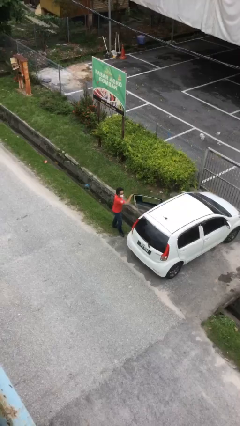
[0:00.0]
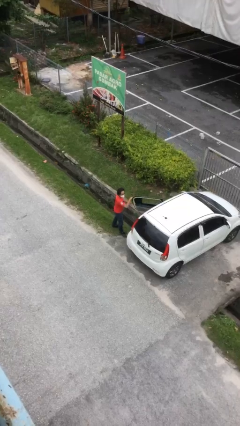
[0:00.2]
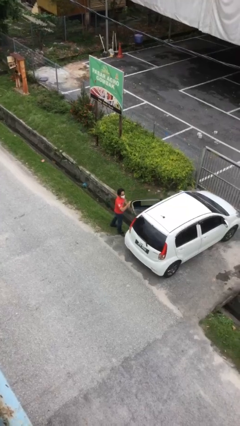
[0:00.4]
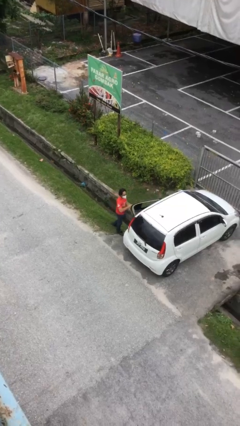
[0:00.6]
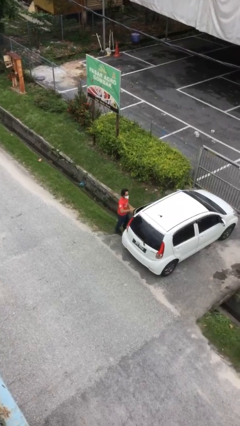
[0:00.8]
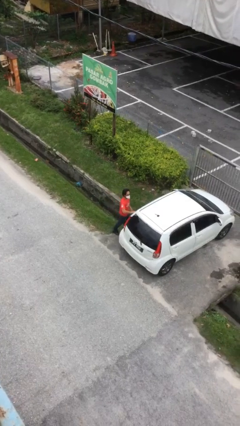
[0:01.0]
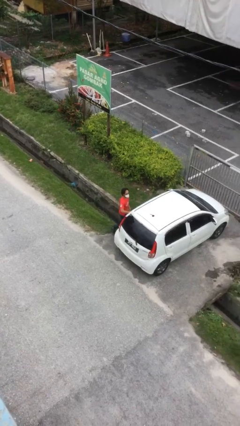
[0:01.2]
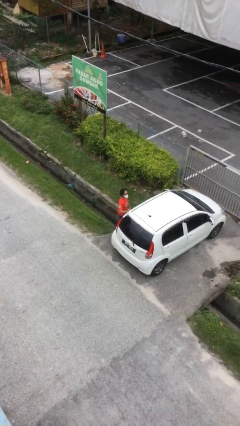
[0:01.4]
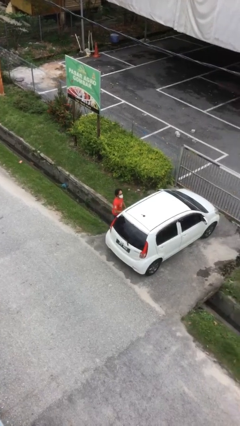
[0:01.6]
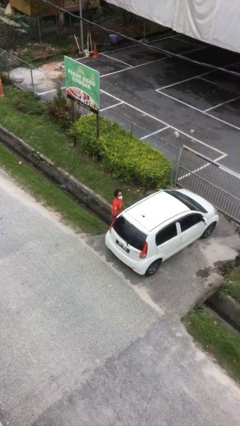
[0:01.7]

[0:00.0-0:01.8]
person closes car door

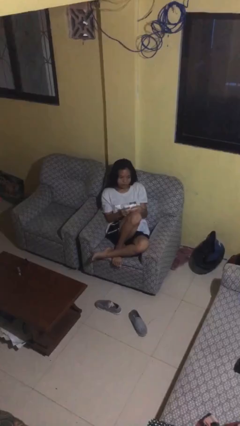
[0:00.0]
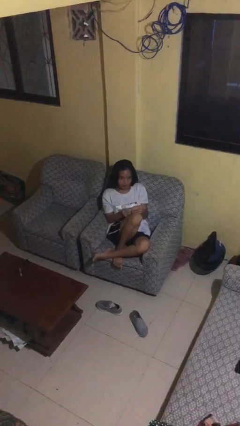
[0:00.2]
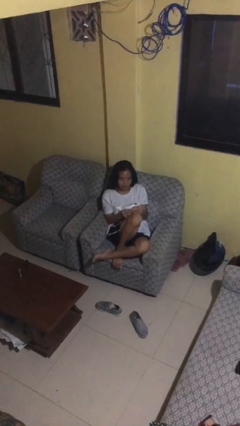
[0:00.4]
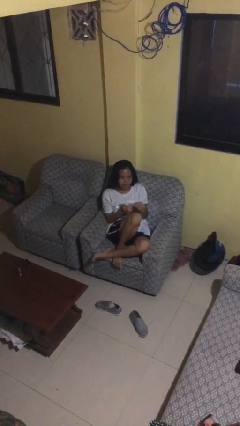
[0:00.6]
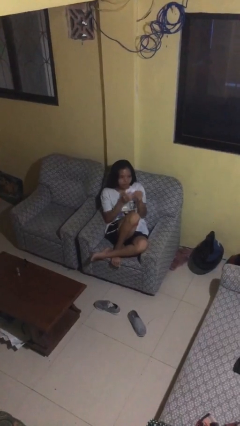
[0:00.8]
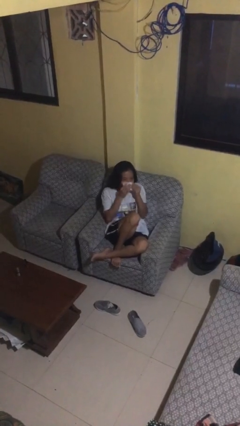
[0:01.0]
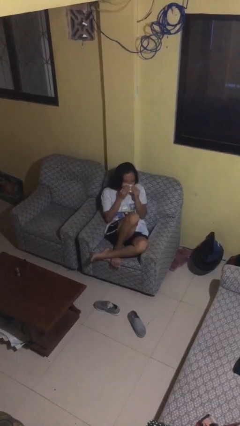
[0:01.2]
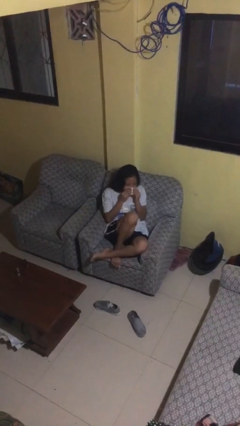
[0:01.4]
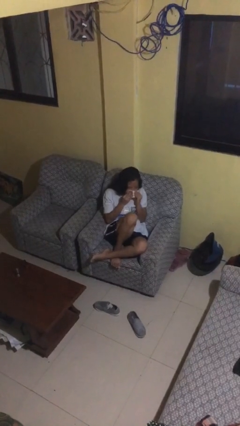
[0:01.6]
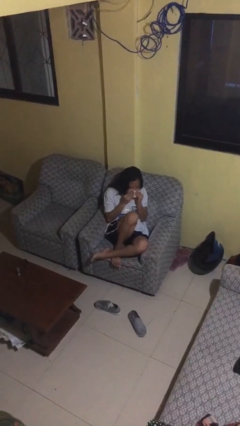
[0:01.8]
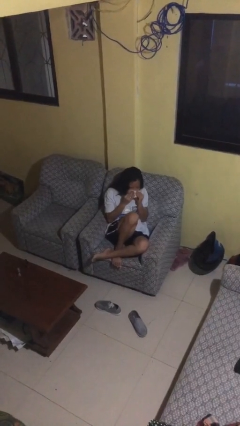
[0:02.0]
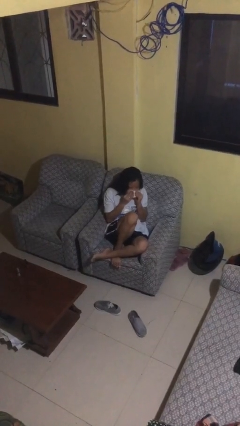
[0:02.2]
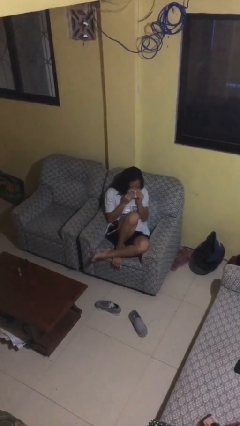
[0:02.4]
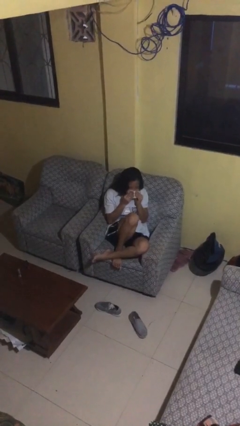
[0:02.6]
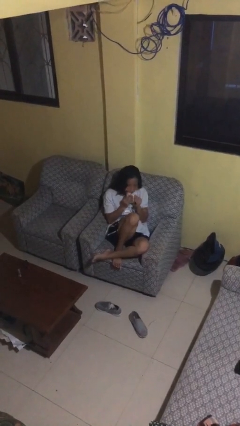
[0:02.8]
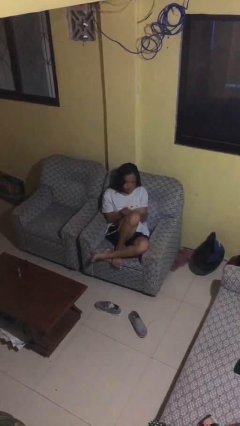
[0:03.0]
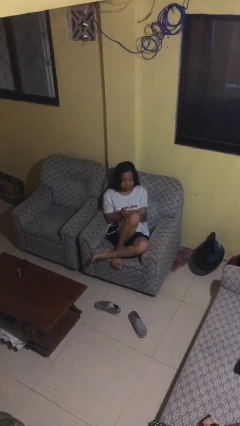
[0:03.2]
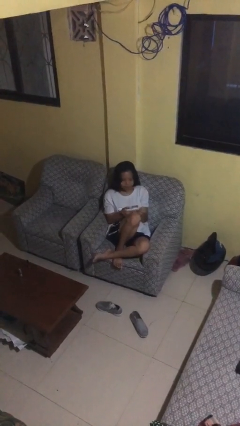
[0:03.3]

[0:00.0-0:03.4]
person blows nose

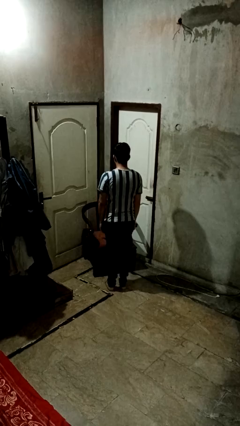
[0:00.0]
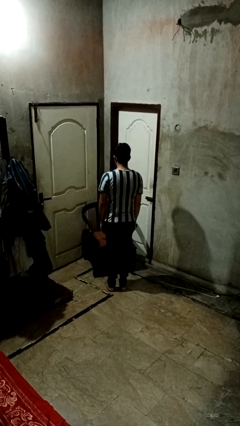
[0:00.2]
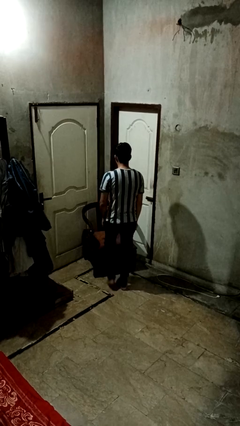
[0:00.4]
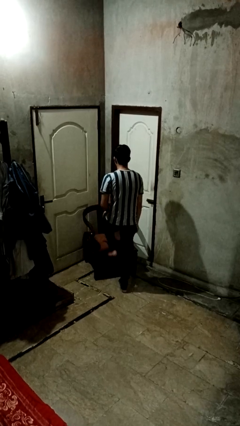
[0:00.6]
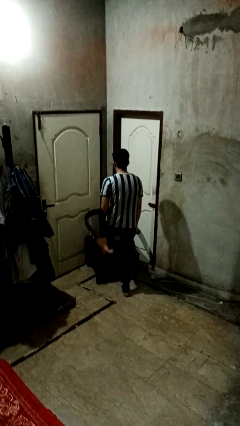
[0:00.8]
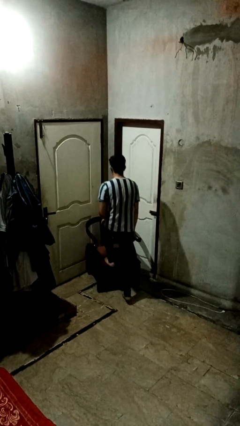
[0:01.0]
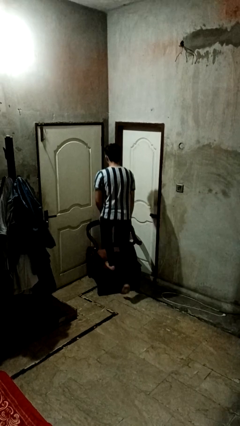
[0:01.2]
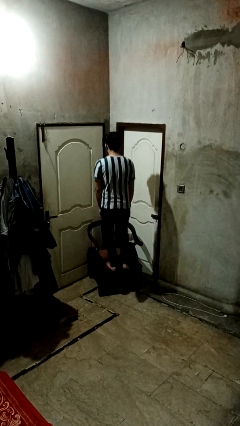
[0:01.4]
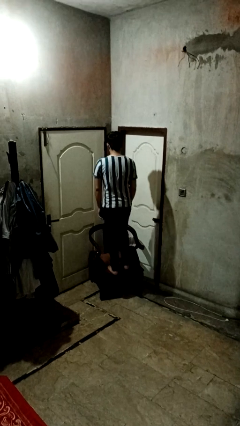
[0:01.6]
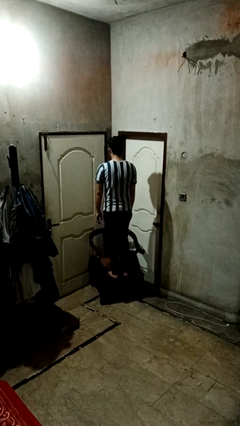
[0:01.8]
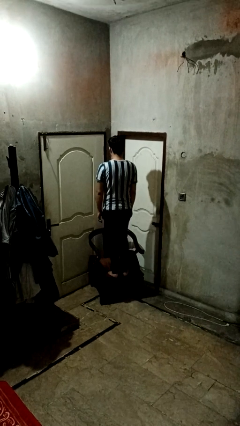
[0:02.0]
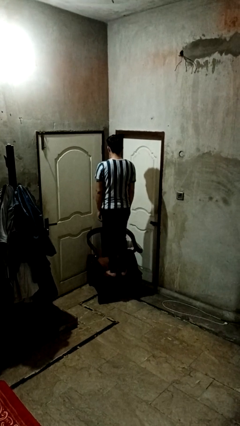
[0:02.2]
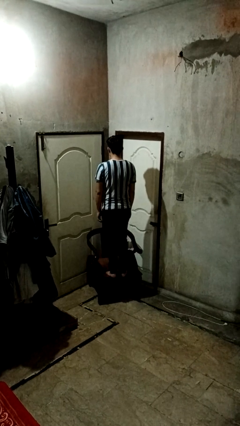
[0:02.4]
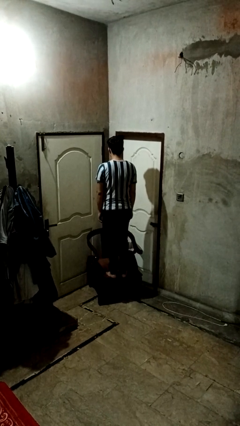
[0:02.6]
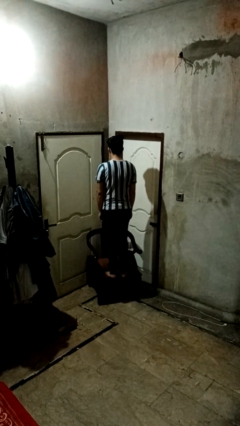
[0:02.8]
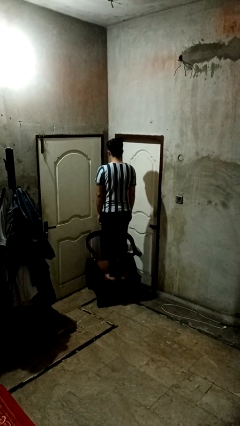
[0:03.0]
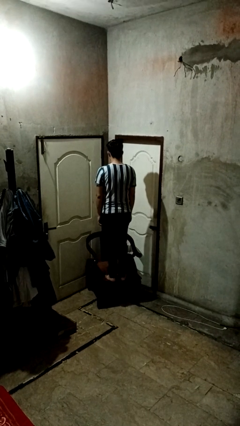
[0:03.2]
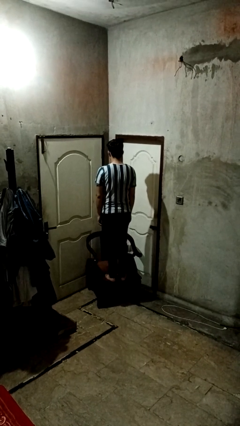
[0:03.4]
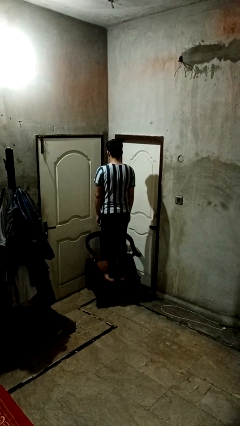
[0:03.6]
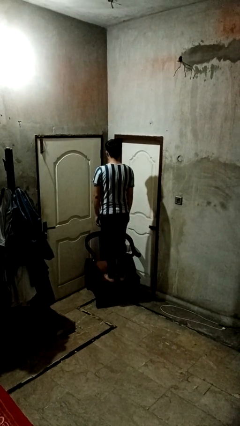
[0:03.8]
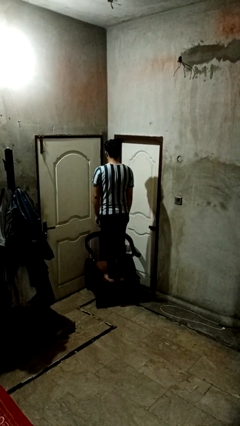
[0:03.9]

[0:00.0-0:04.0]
person climbs on couch

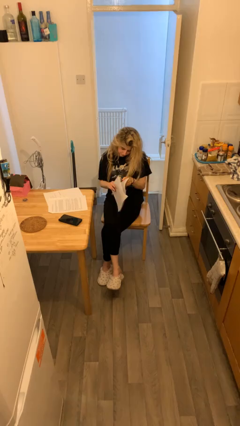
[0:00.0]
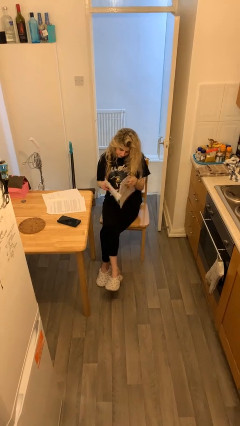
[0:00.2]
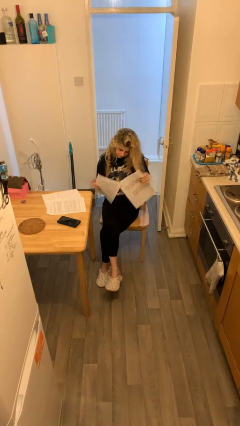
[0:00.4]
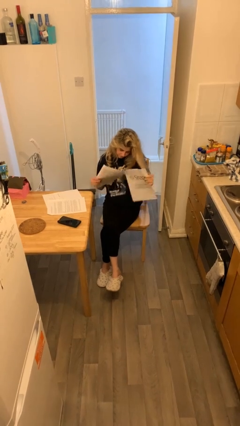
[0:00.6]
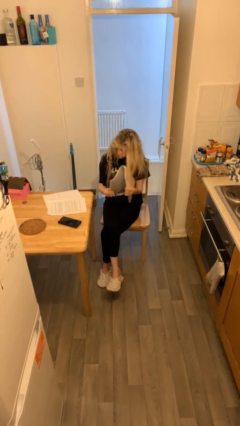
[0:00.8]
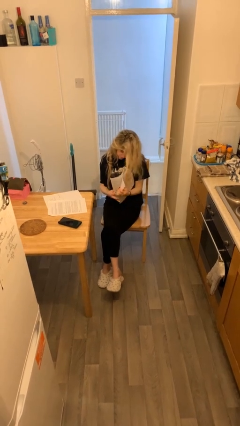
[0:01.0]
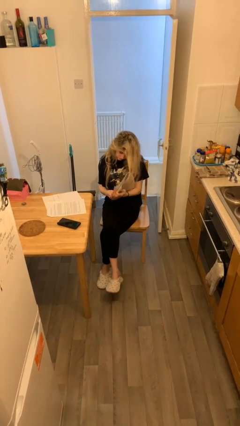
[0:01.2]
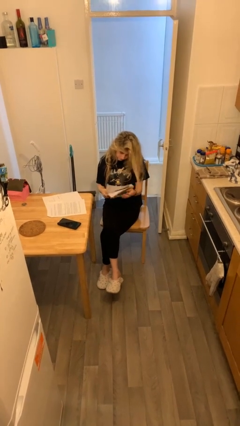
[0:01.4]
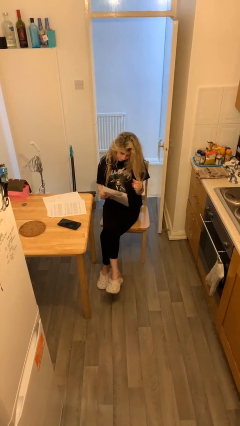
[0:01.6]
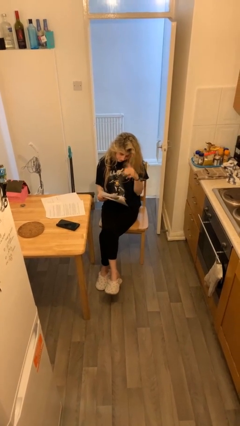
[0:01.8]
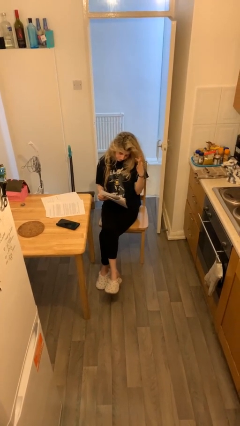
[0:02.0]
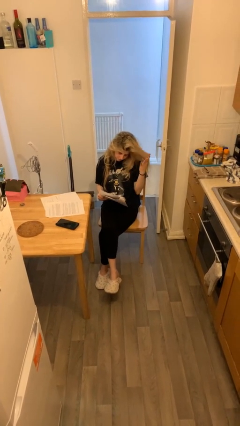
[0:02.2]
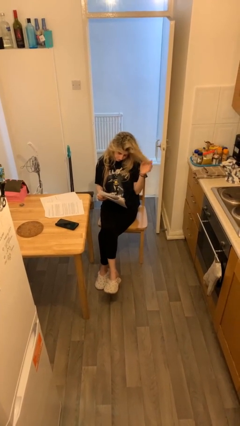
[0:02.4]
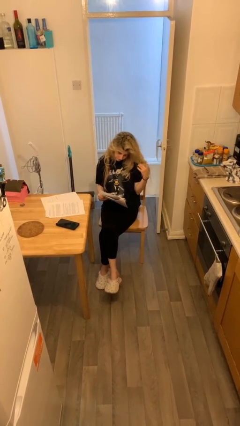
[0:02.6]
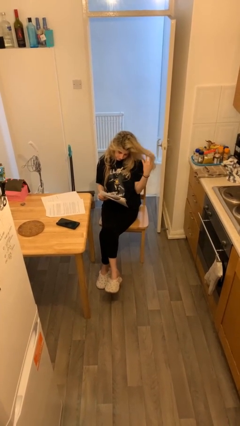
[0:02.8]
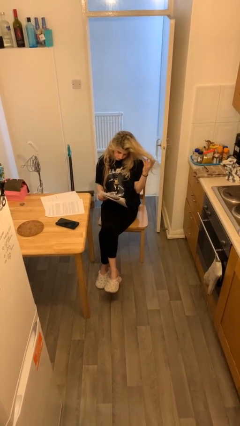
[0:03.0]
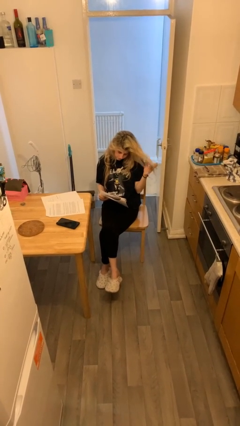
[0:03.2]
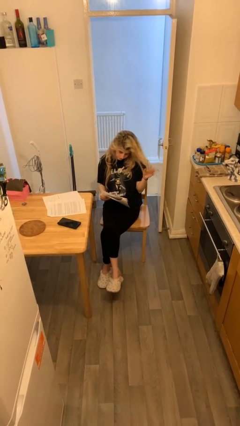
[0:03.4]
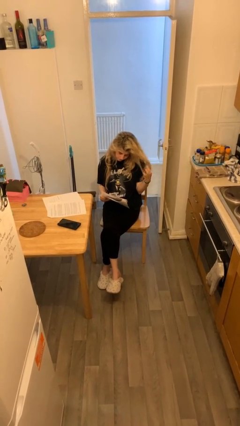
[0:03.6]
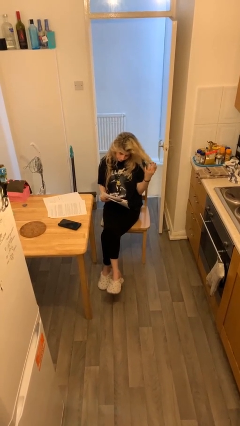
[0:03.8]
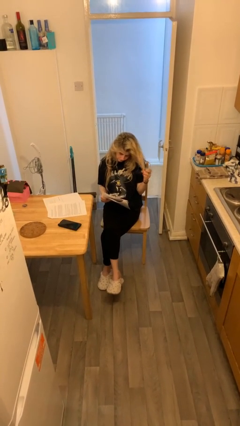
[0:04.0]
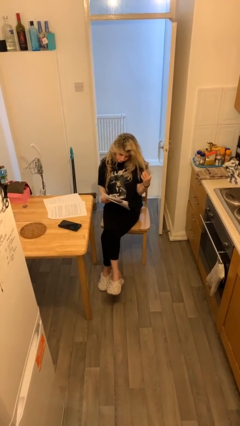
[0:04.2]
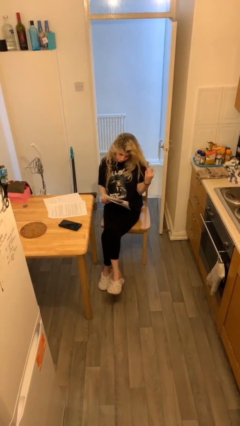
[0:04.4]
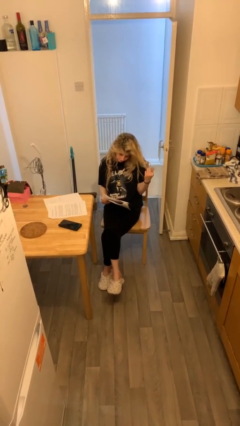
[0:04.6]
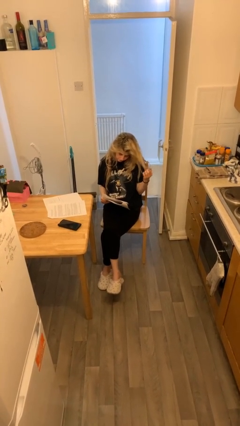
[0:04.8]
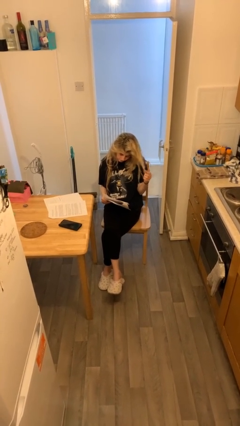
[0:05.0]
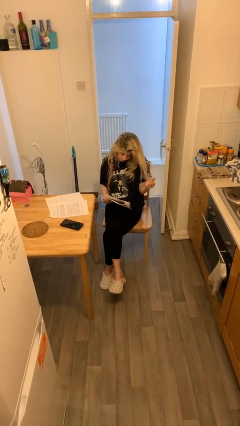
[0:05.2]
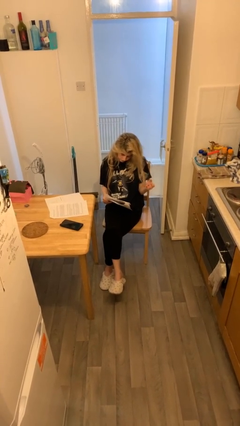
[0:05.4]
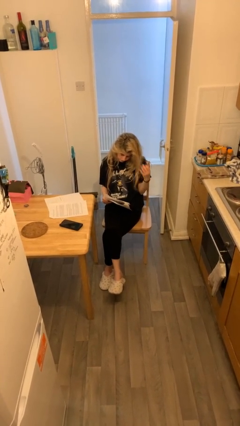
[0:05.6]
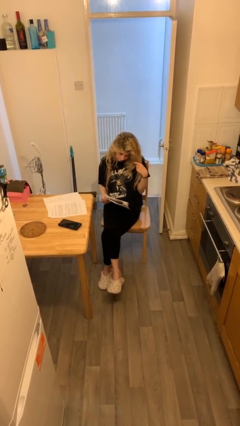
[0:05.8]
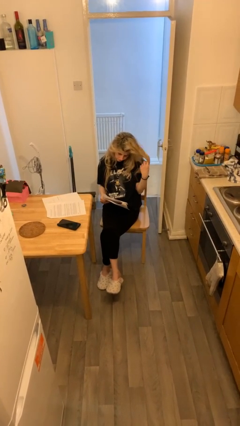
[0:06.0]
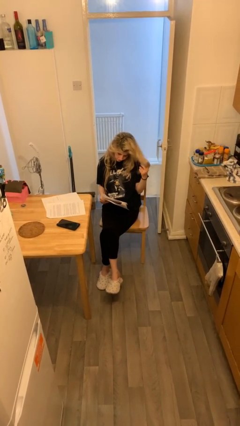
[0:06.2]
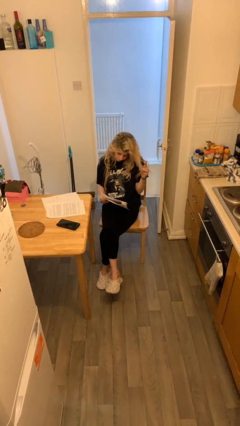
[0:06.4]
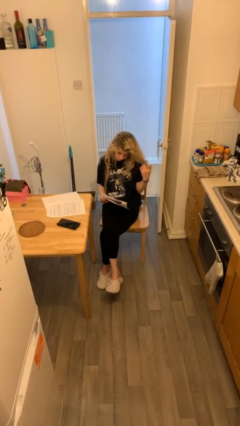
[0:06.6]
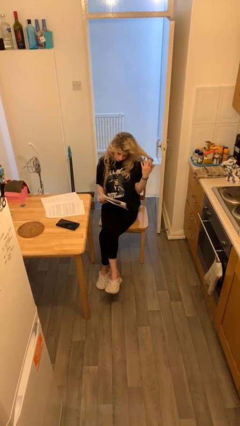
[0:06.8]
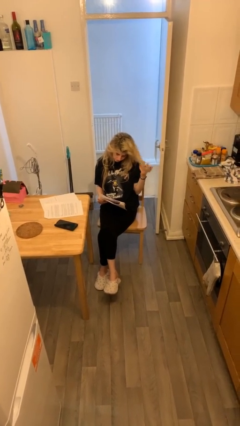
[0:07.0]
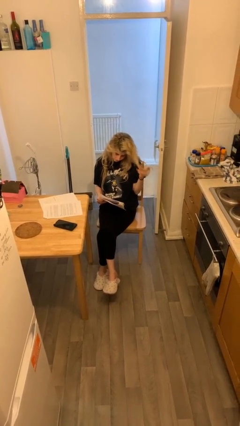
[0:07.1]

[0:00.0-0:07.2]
person reads document

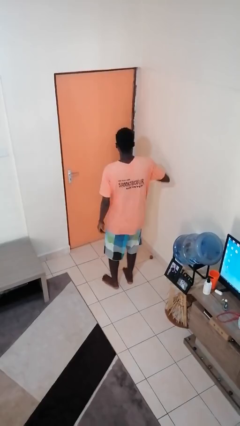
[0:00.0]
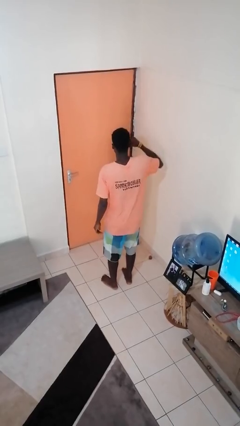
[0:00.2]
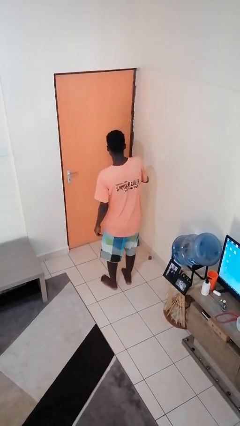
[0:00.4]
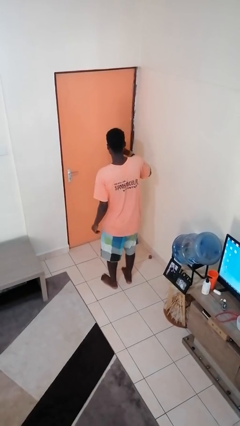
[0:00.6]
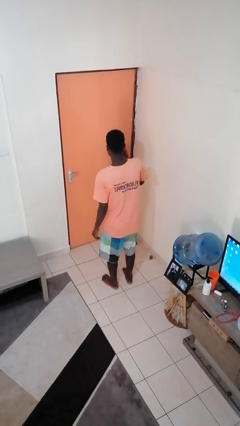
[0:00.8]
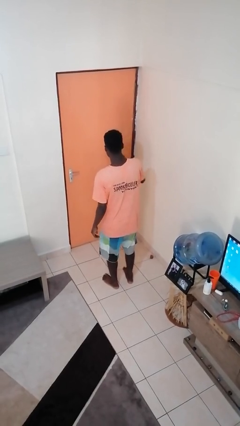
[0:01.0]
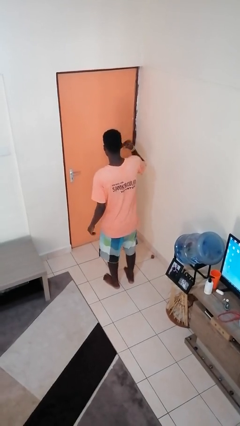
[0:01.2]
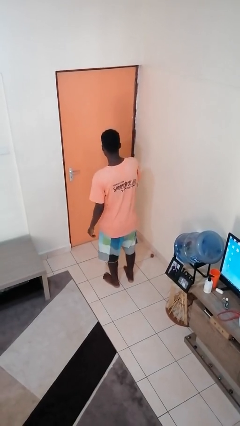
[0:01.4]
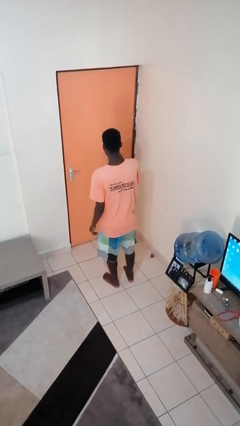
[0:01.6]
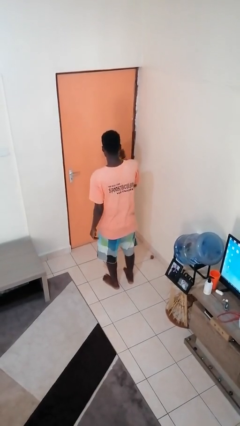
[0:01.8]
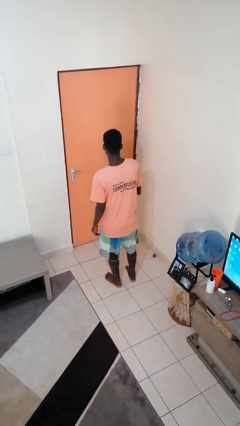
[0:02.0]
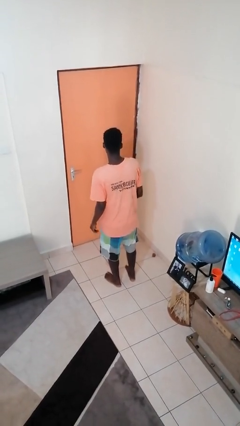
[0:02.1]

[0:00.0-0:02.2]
person snaps fingers
